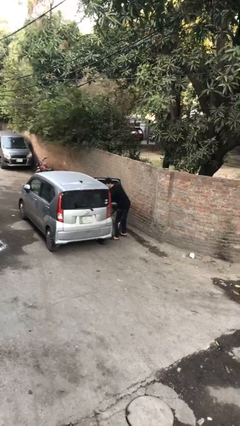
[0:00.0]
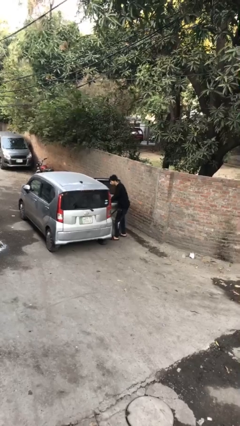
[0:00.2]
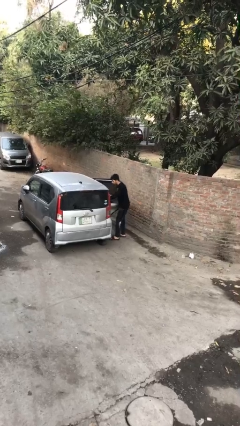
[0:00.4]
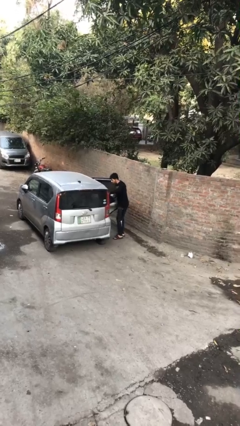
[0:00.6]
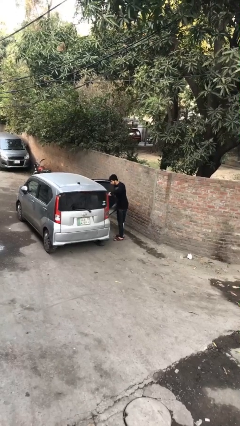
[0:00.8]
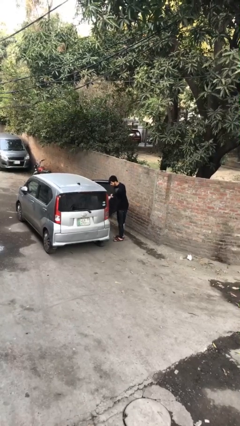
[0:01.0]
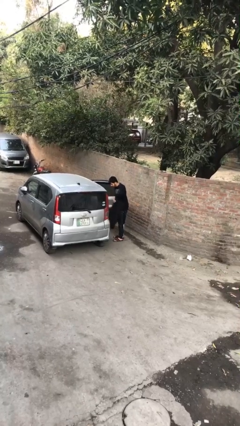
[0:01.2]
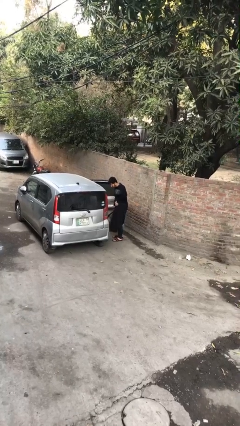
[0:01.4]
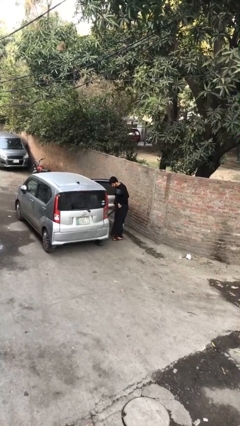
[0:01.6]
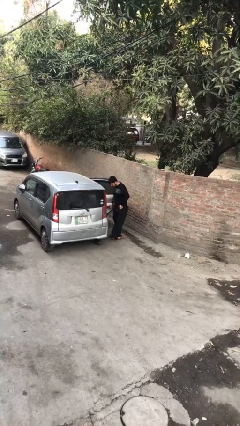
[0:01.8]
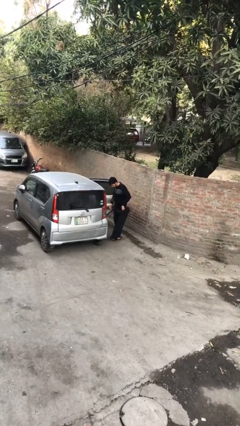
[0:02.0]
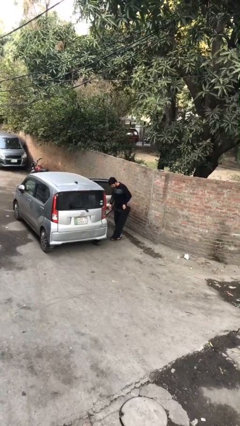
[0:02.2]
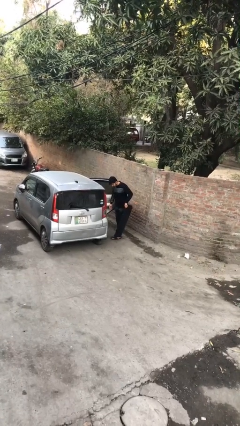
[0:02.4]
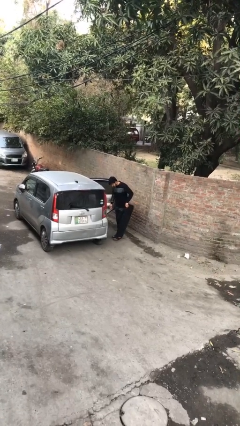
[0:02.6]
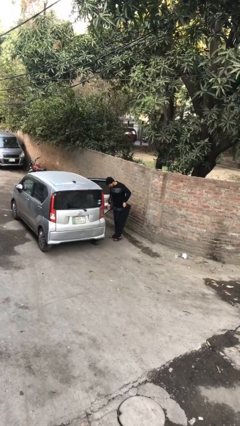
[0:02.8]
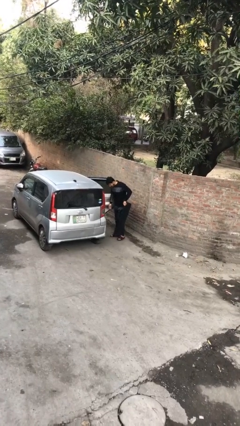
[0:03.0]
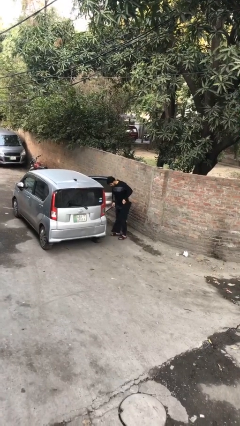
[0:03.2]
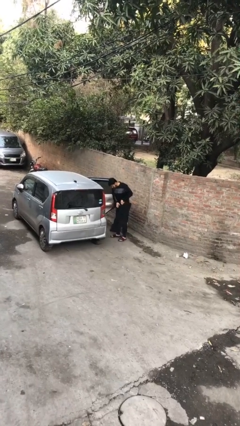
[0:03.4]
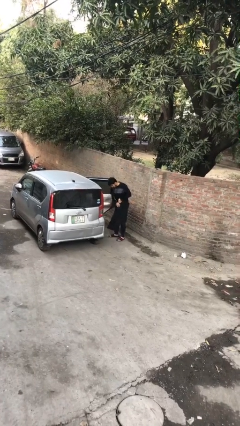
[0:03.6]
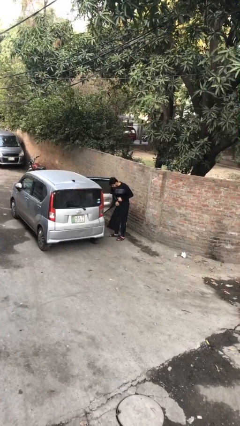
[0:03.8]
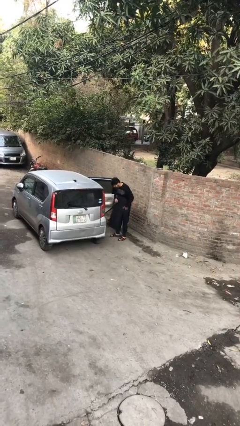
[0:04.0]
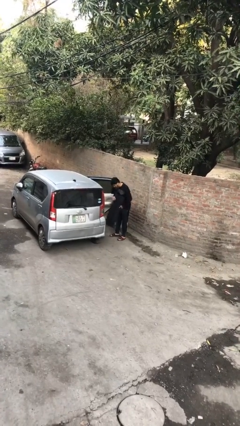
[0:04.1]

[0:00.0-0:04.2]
person unloads car

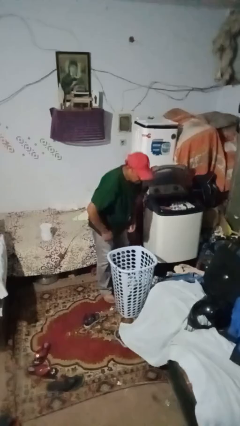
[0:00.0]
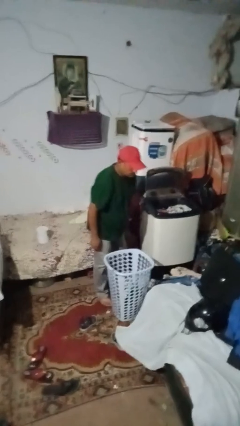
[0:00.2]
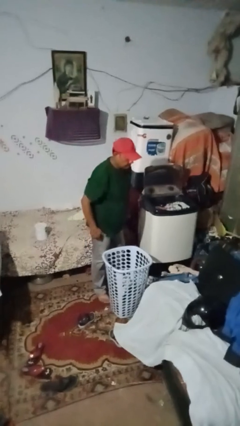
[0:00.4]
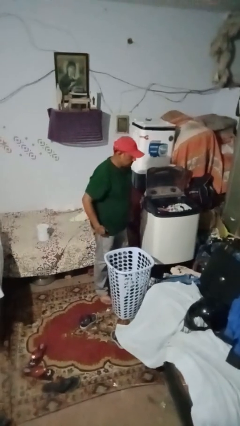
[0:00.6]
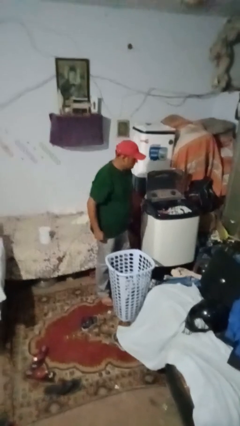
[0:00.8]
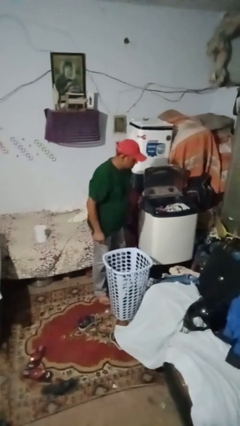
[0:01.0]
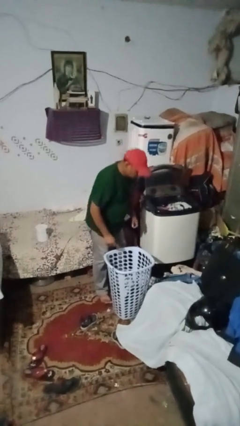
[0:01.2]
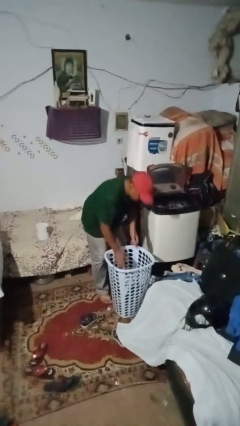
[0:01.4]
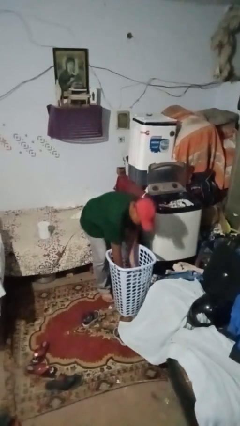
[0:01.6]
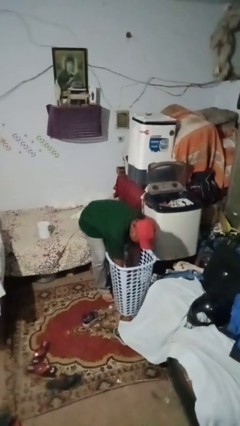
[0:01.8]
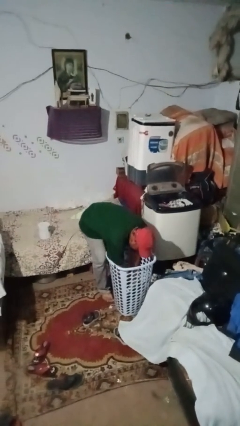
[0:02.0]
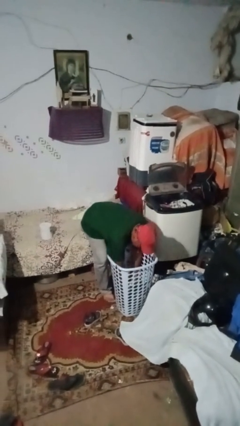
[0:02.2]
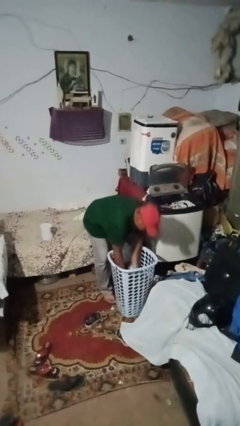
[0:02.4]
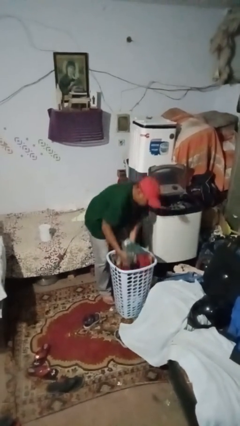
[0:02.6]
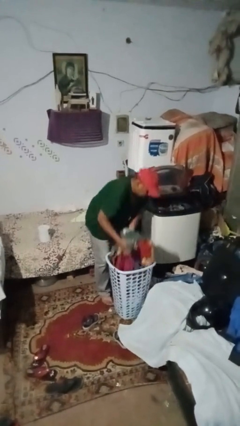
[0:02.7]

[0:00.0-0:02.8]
person unloads dryer

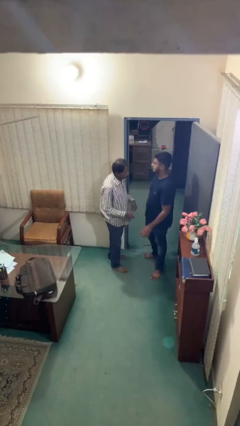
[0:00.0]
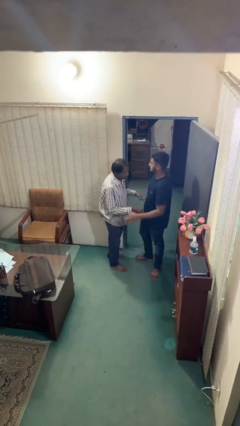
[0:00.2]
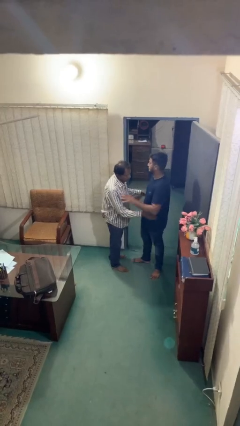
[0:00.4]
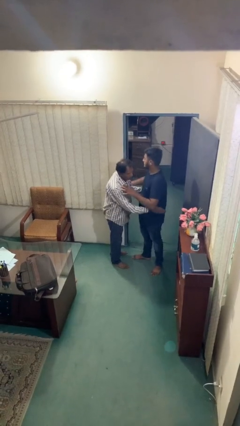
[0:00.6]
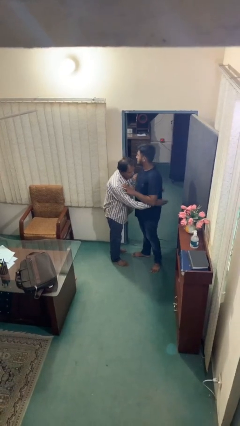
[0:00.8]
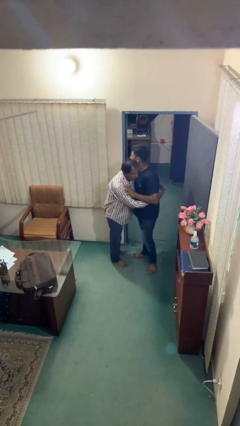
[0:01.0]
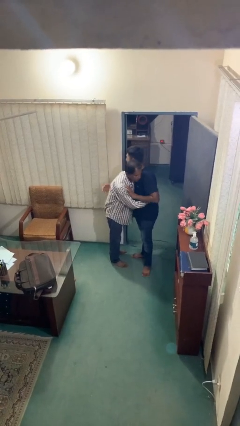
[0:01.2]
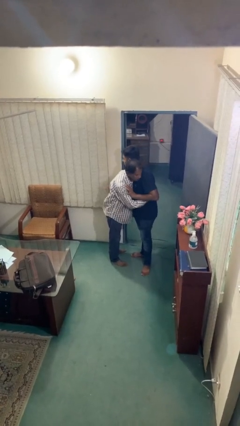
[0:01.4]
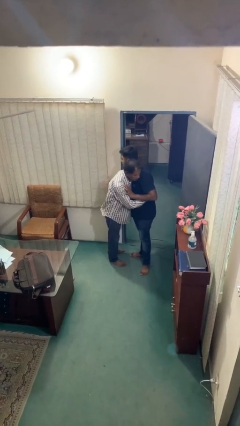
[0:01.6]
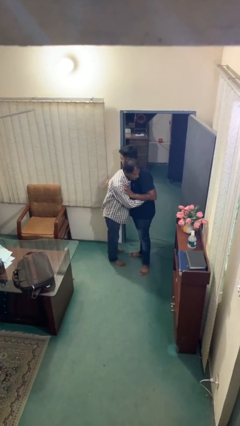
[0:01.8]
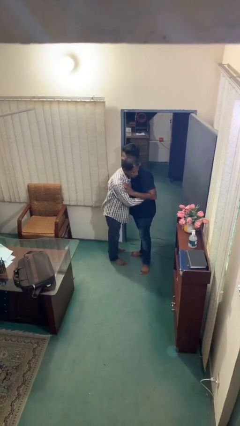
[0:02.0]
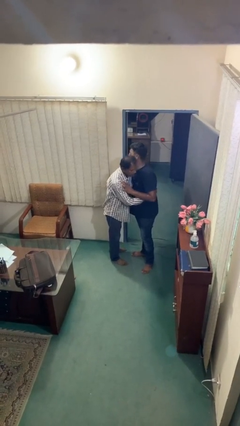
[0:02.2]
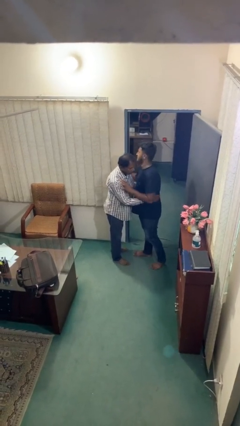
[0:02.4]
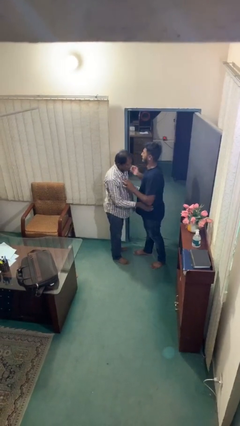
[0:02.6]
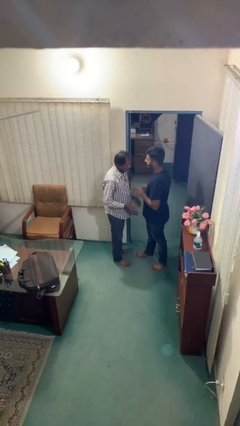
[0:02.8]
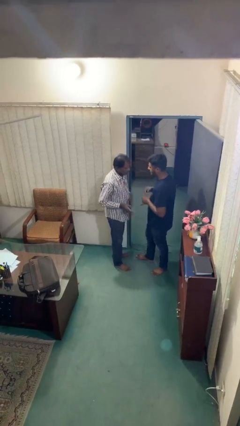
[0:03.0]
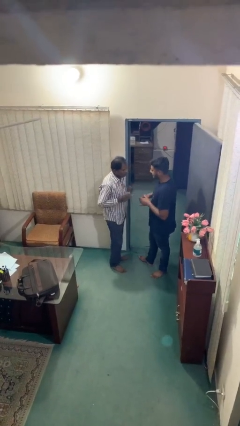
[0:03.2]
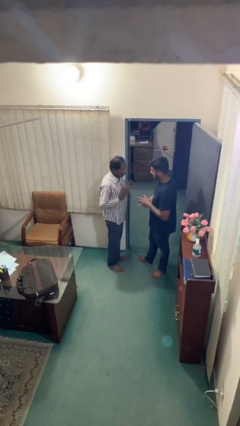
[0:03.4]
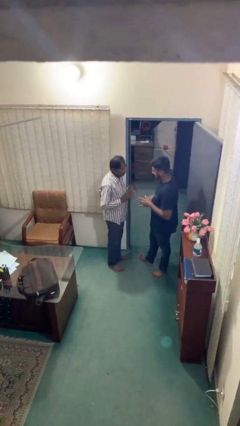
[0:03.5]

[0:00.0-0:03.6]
person embraces person

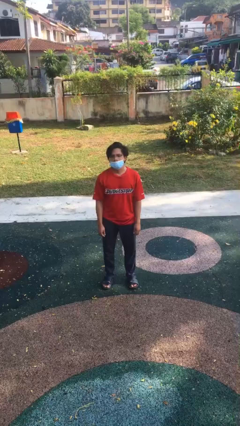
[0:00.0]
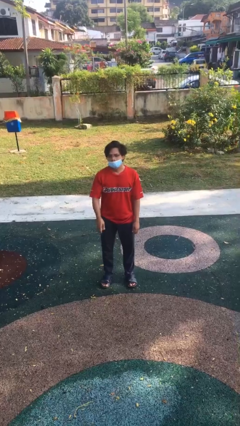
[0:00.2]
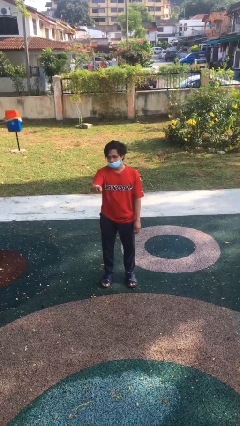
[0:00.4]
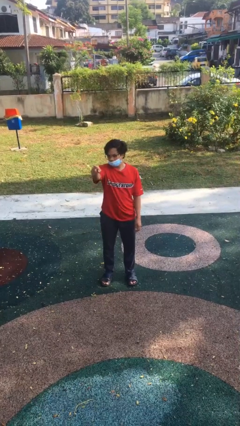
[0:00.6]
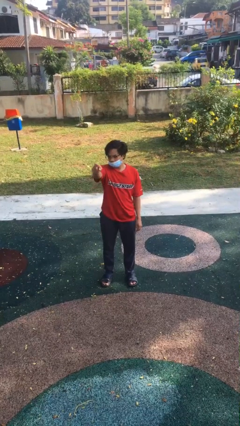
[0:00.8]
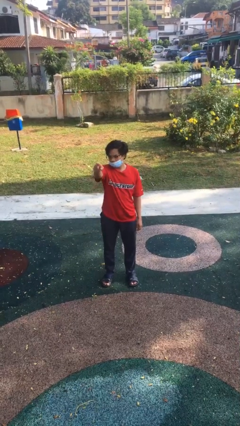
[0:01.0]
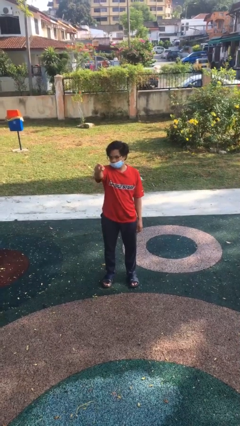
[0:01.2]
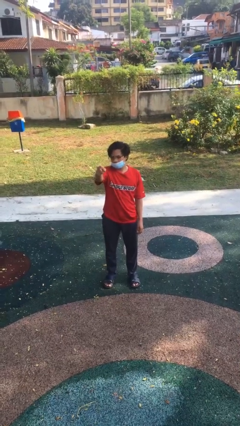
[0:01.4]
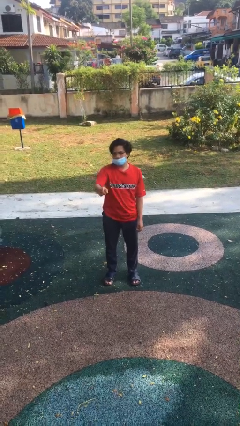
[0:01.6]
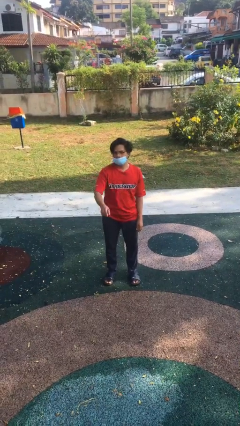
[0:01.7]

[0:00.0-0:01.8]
person points at person

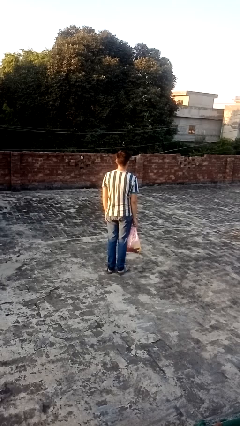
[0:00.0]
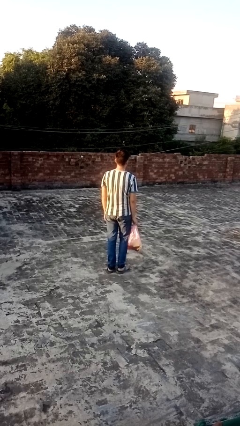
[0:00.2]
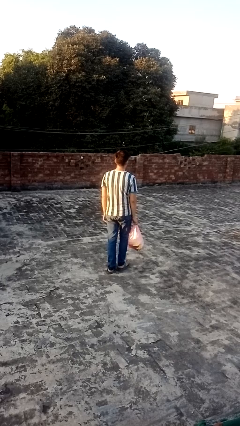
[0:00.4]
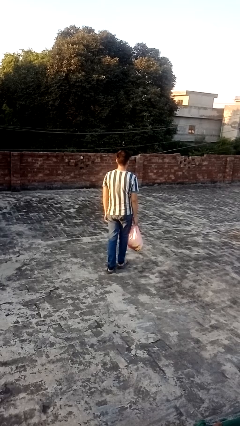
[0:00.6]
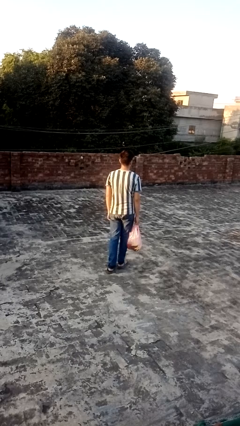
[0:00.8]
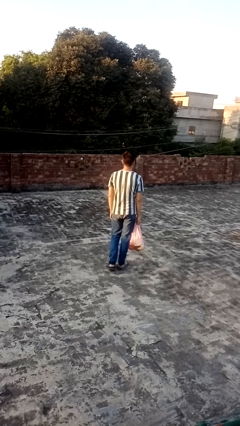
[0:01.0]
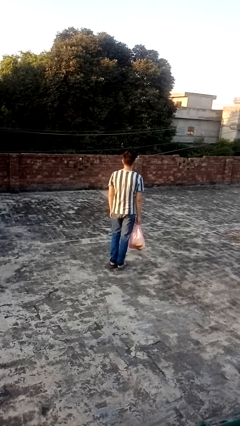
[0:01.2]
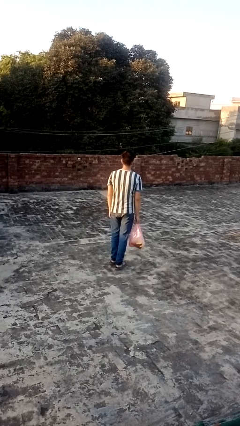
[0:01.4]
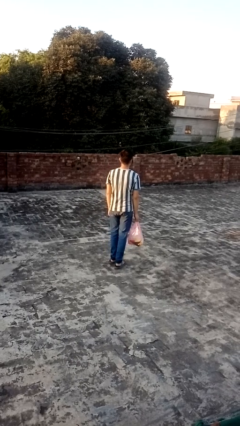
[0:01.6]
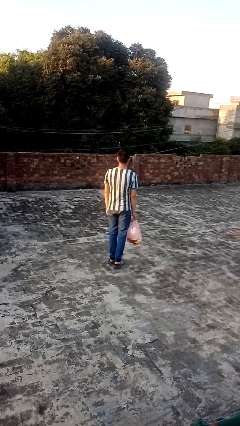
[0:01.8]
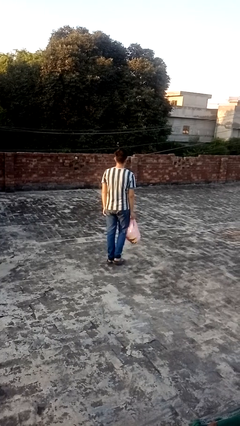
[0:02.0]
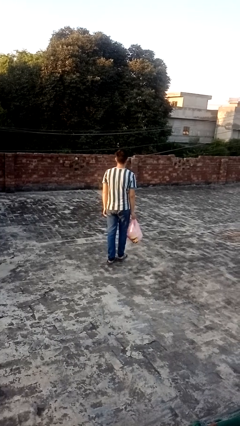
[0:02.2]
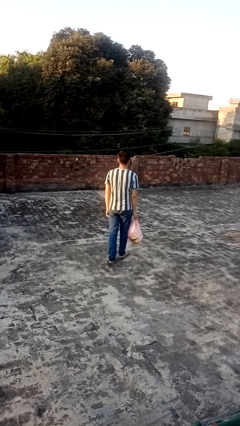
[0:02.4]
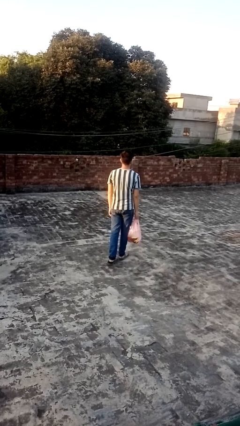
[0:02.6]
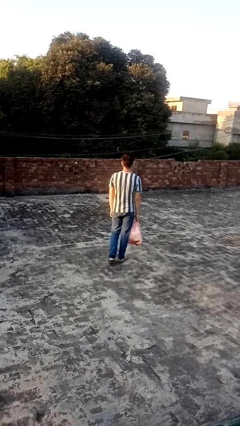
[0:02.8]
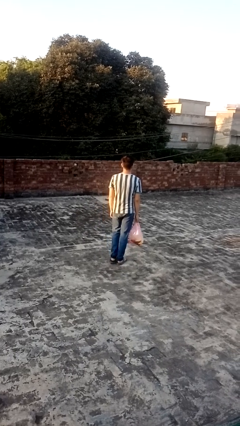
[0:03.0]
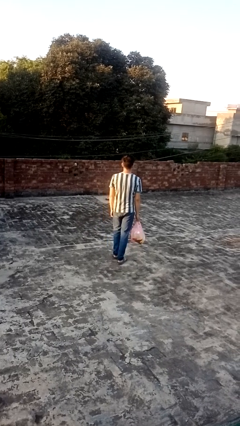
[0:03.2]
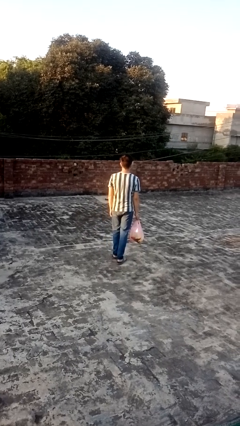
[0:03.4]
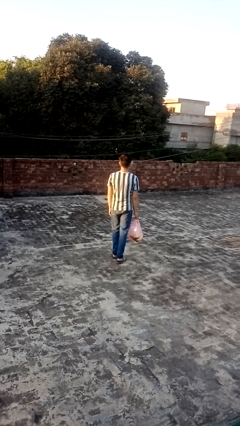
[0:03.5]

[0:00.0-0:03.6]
person carries groceries

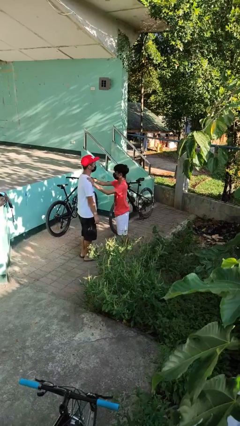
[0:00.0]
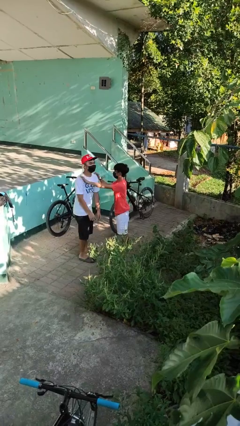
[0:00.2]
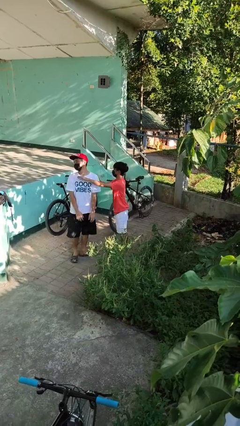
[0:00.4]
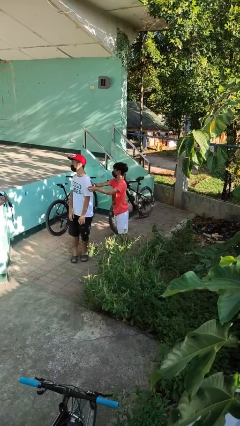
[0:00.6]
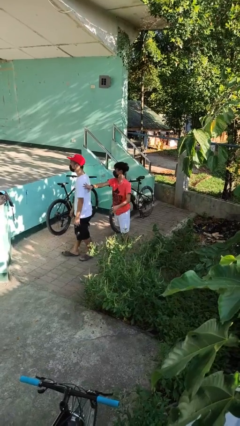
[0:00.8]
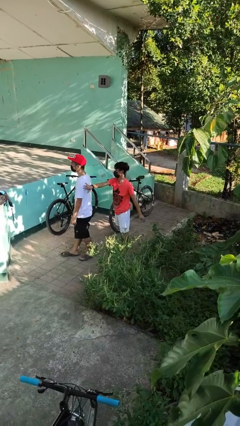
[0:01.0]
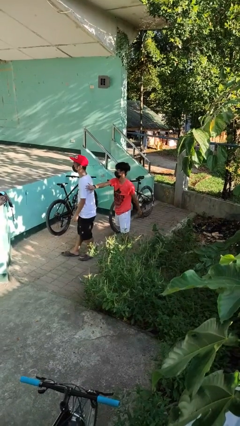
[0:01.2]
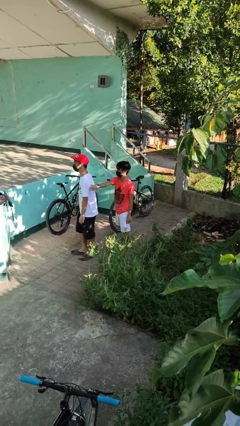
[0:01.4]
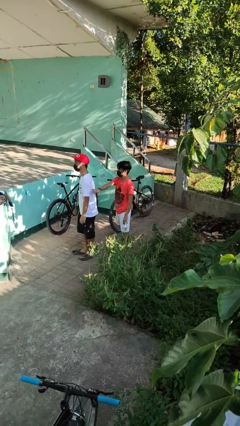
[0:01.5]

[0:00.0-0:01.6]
person spins person around
